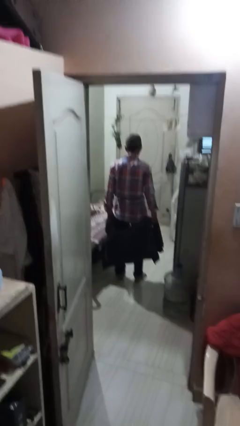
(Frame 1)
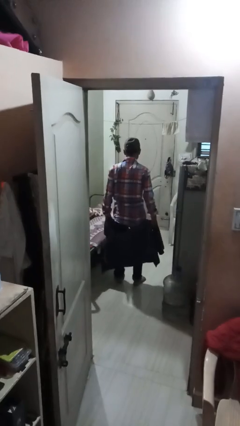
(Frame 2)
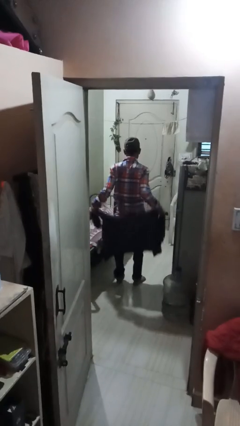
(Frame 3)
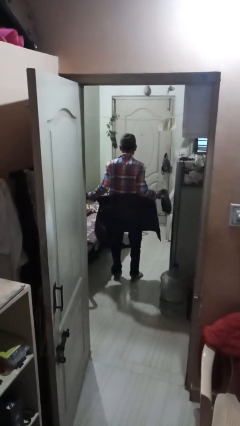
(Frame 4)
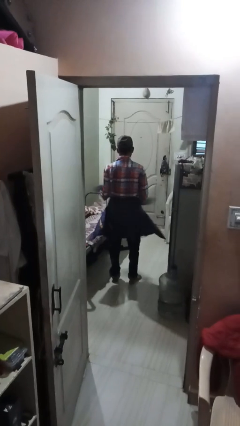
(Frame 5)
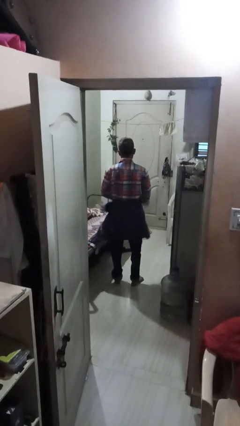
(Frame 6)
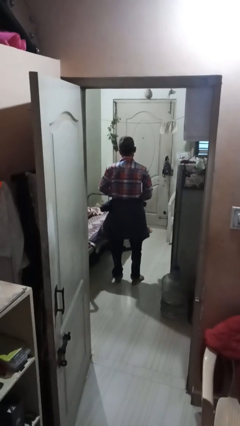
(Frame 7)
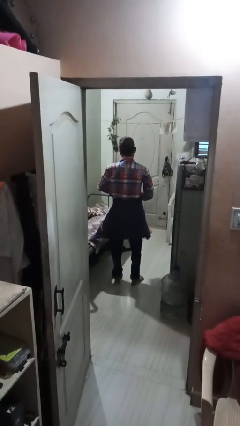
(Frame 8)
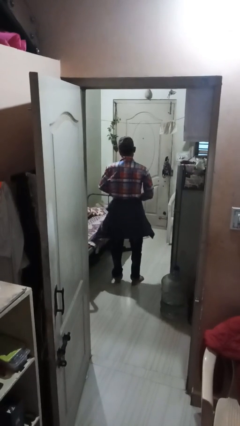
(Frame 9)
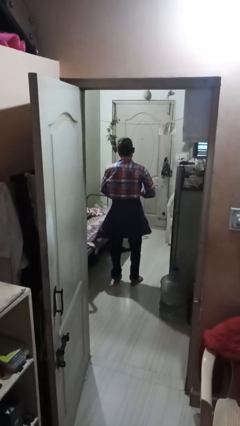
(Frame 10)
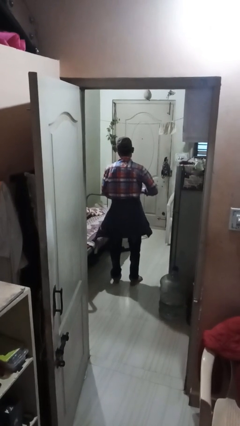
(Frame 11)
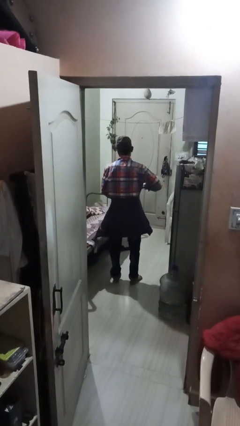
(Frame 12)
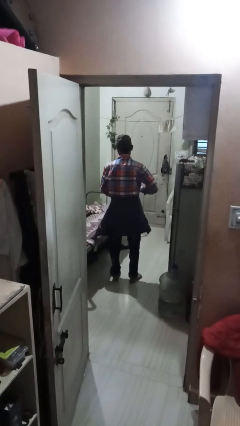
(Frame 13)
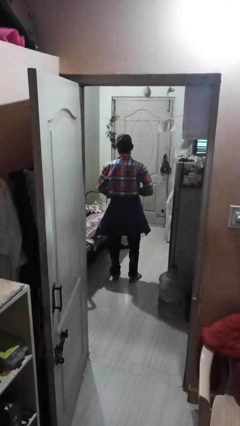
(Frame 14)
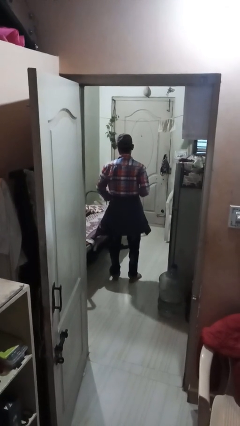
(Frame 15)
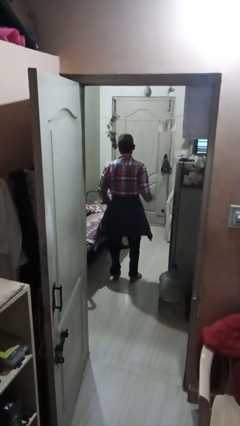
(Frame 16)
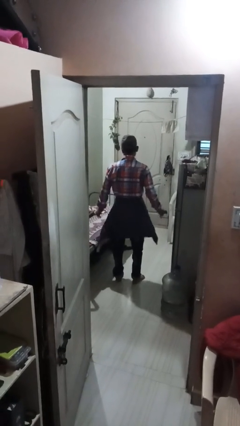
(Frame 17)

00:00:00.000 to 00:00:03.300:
person ties jacket around waist

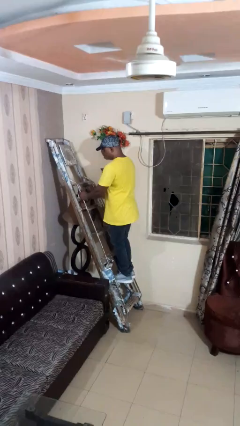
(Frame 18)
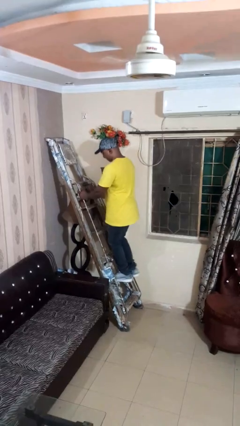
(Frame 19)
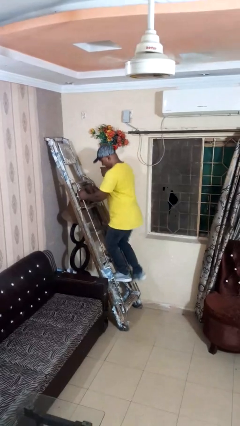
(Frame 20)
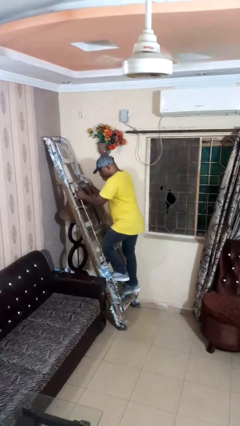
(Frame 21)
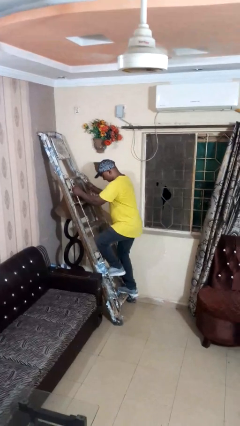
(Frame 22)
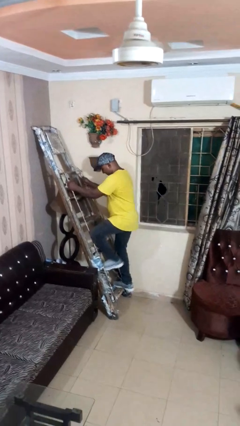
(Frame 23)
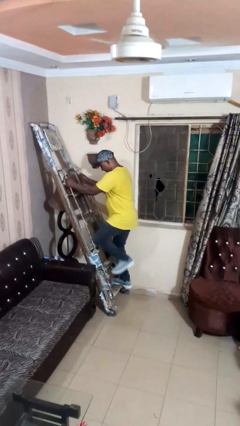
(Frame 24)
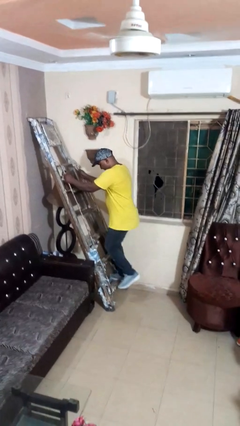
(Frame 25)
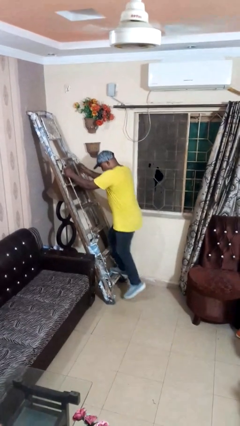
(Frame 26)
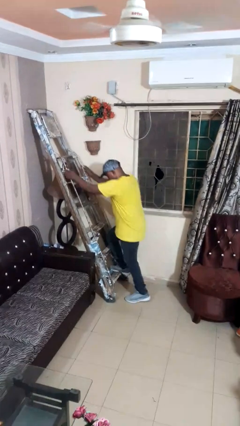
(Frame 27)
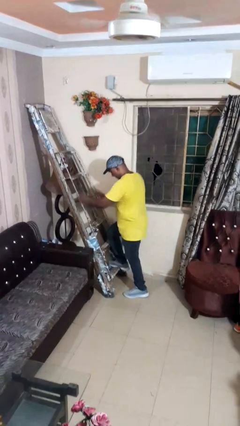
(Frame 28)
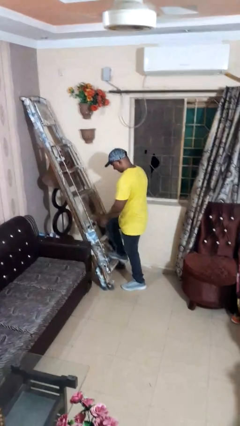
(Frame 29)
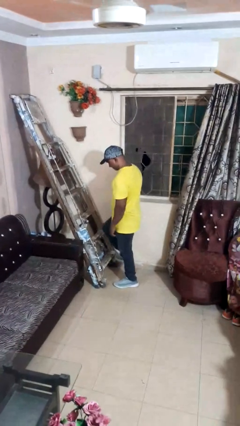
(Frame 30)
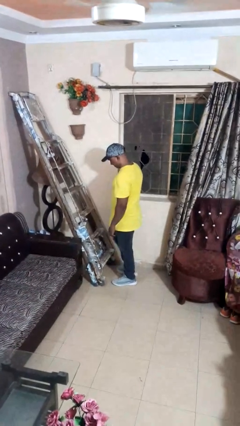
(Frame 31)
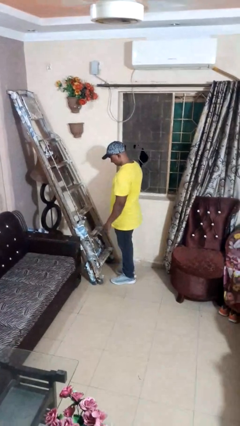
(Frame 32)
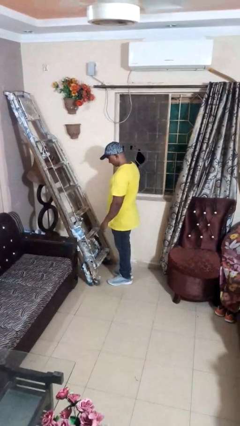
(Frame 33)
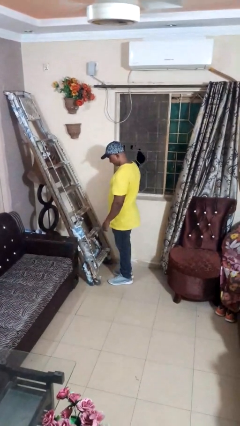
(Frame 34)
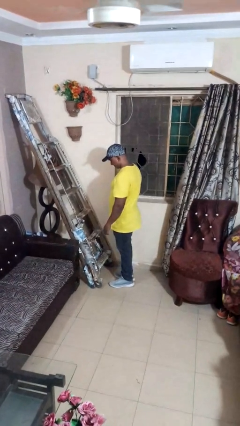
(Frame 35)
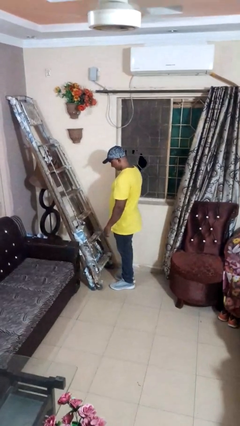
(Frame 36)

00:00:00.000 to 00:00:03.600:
person climbs down ladder

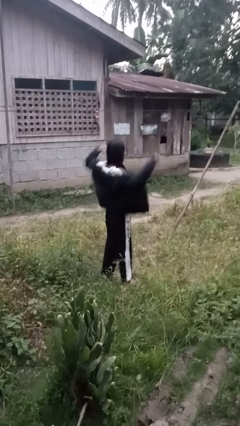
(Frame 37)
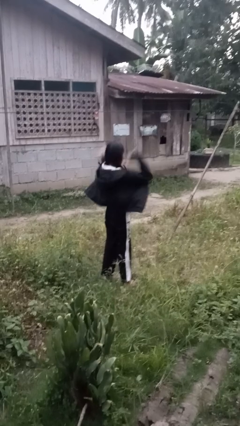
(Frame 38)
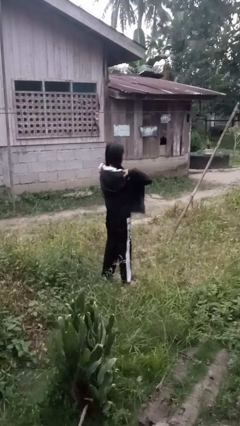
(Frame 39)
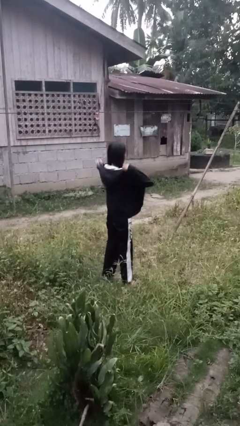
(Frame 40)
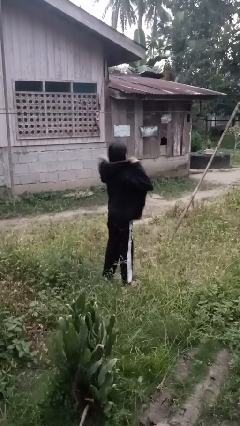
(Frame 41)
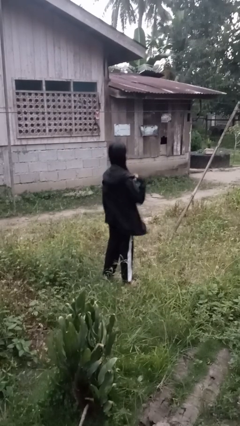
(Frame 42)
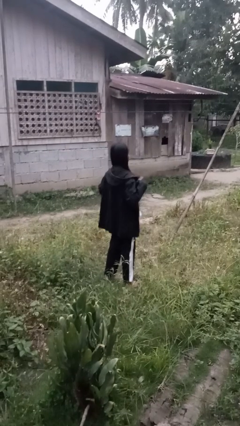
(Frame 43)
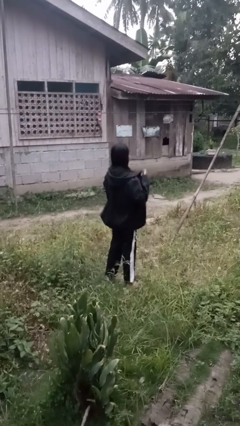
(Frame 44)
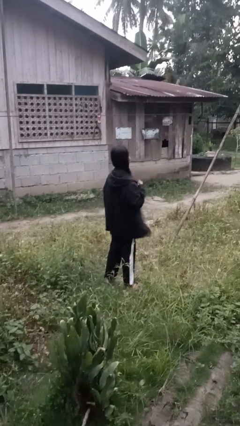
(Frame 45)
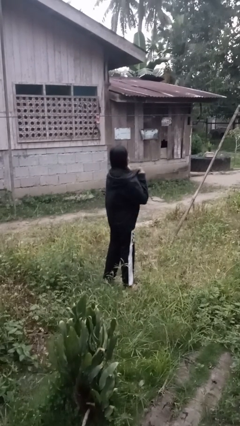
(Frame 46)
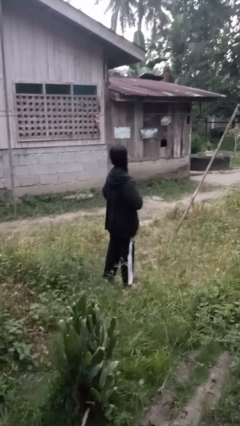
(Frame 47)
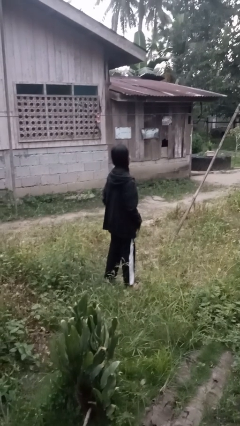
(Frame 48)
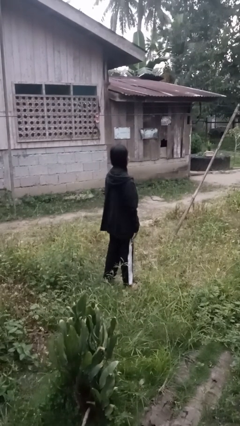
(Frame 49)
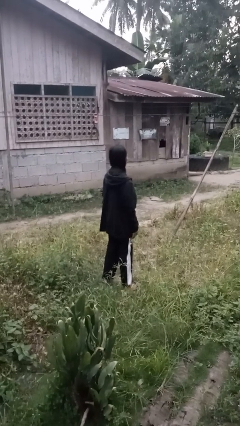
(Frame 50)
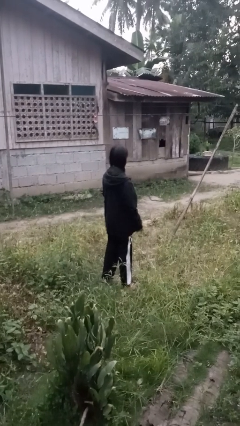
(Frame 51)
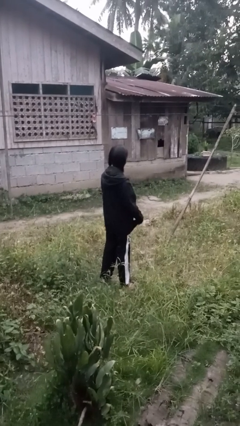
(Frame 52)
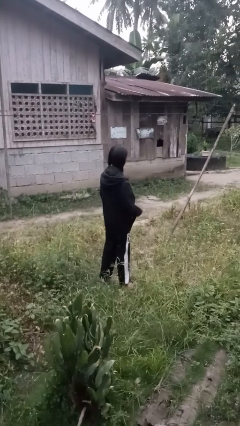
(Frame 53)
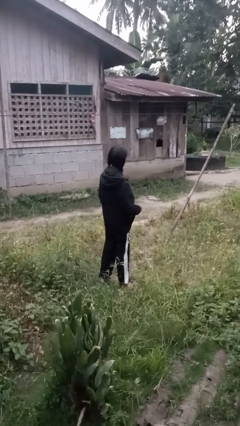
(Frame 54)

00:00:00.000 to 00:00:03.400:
person puts on jacket

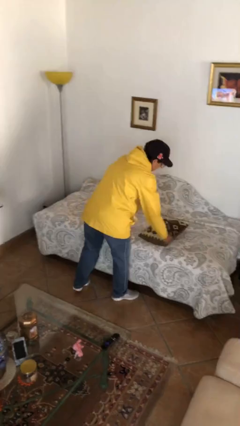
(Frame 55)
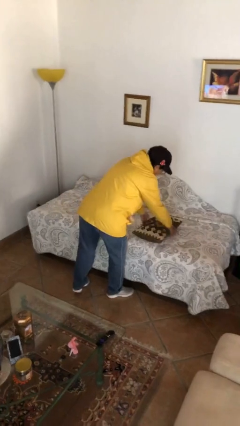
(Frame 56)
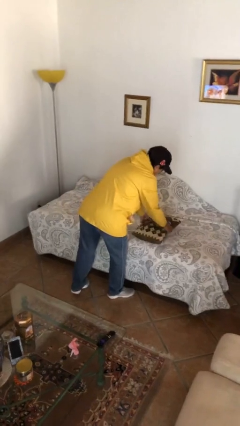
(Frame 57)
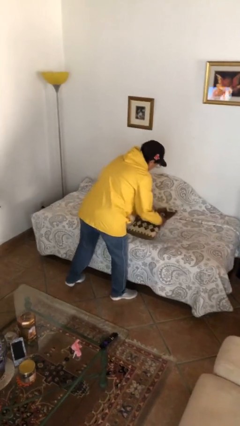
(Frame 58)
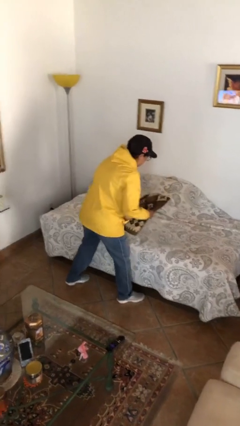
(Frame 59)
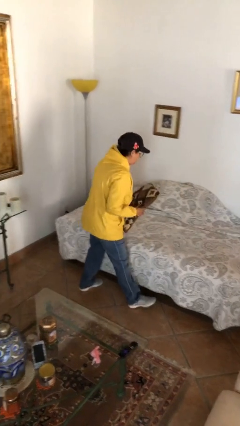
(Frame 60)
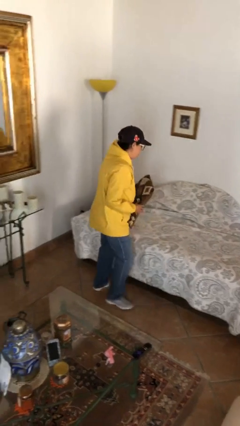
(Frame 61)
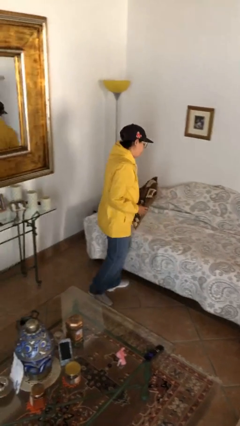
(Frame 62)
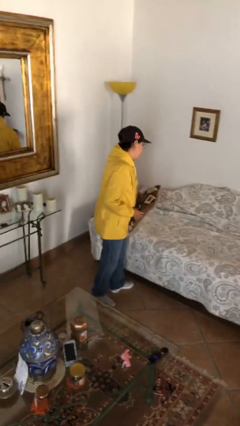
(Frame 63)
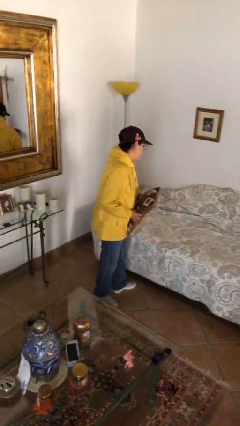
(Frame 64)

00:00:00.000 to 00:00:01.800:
person picks up object from bed

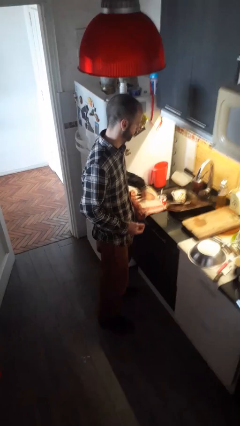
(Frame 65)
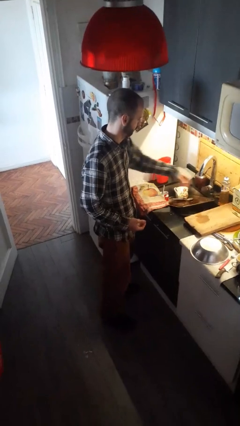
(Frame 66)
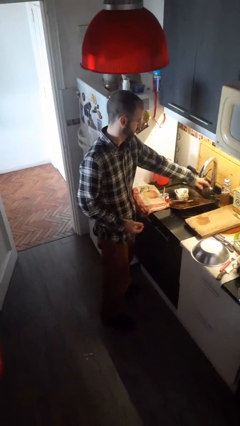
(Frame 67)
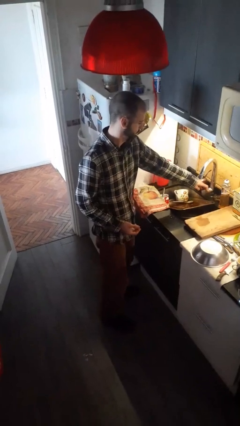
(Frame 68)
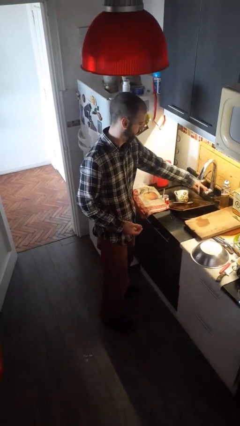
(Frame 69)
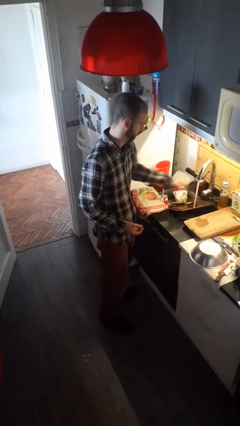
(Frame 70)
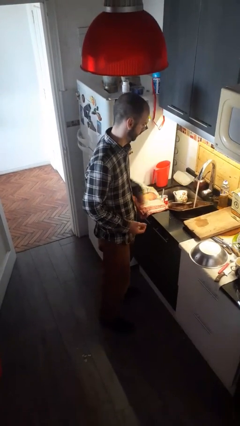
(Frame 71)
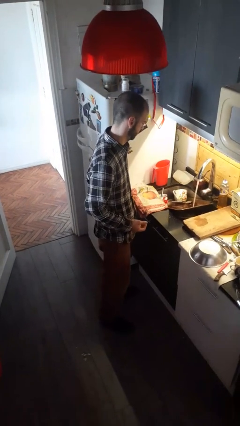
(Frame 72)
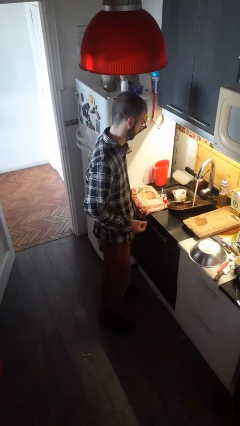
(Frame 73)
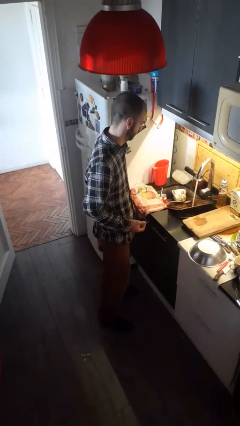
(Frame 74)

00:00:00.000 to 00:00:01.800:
person turns on faucet

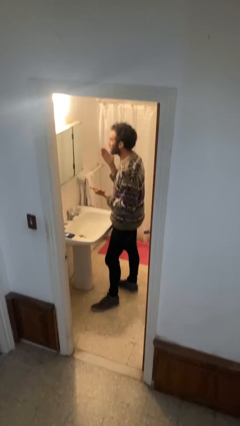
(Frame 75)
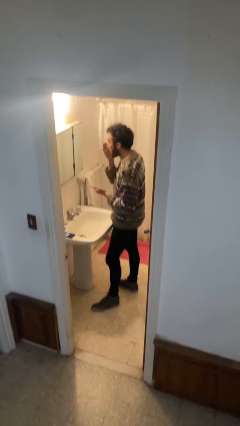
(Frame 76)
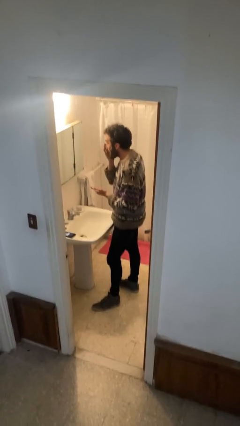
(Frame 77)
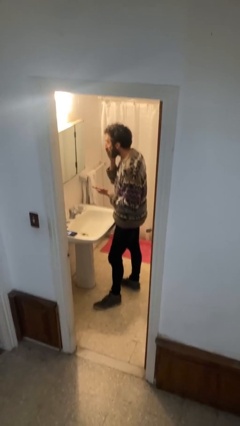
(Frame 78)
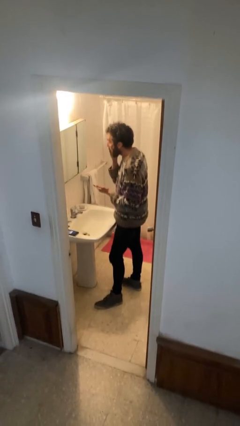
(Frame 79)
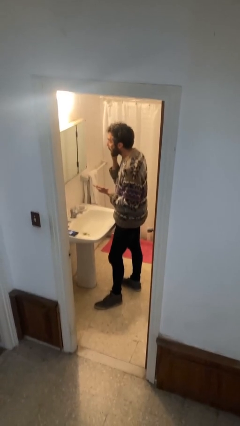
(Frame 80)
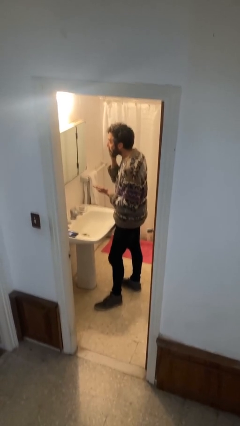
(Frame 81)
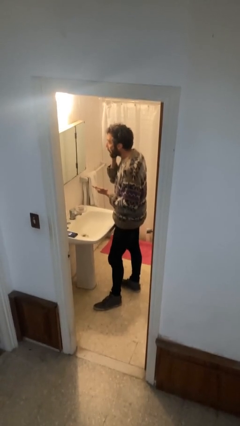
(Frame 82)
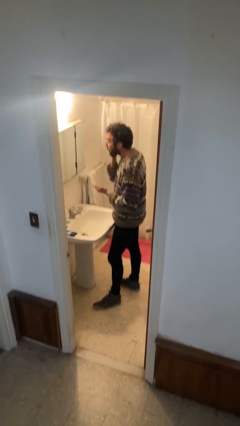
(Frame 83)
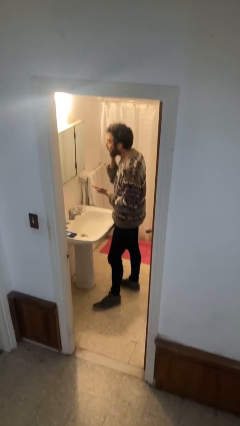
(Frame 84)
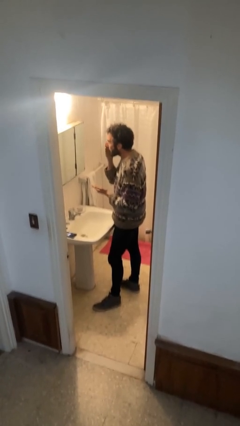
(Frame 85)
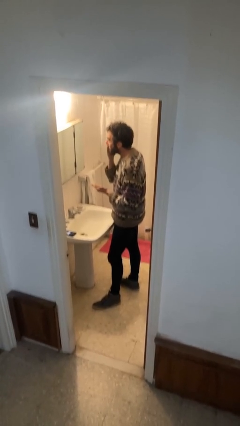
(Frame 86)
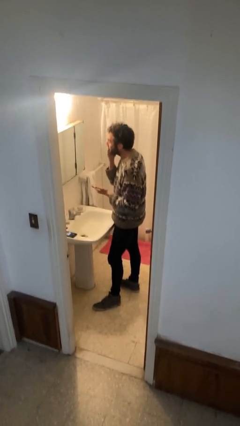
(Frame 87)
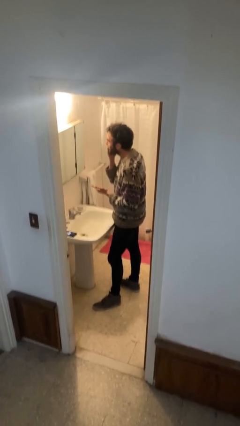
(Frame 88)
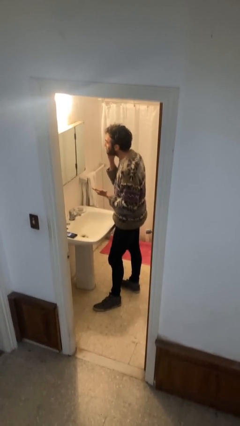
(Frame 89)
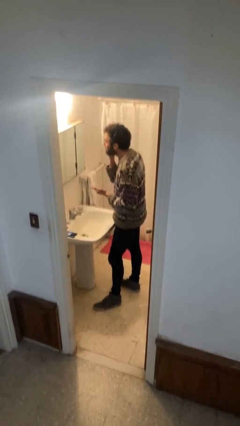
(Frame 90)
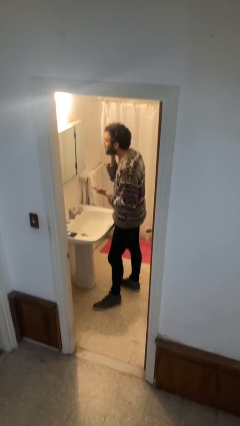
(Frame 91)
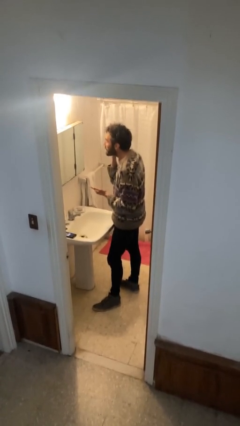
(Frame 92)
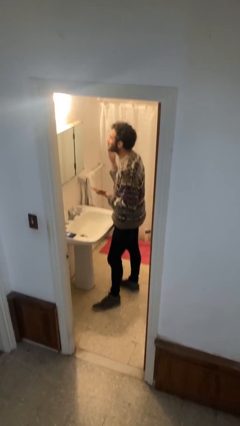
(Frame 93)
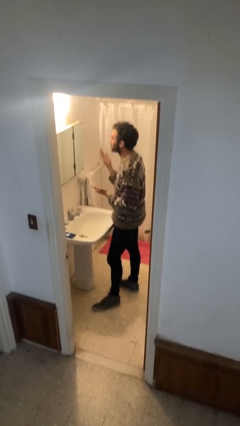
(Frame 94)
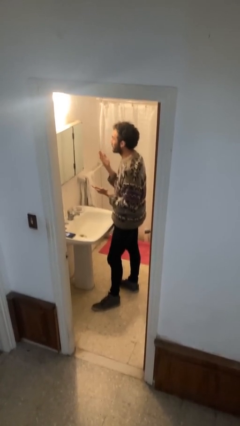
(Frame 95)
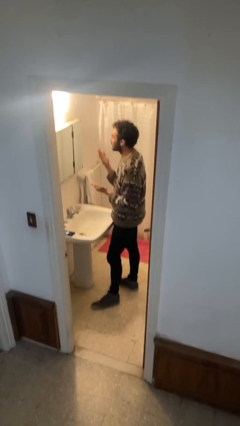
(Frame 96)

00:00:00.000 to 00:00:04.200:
person applies foundation makeup
